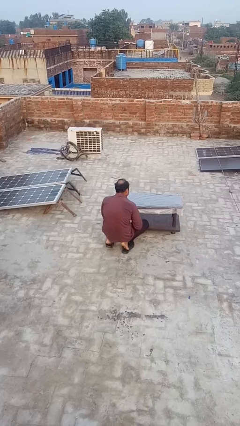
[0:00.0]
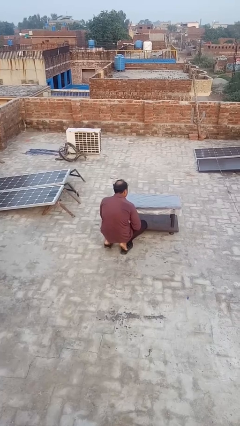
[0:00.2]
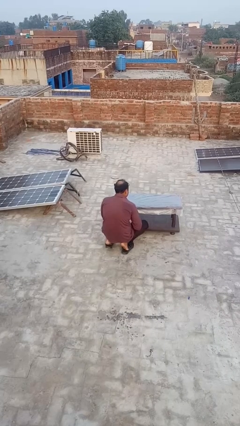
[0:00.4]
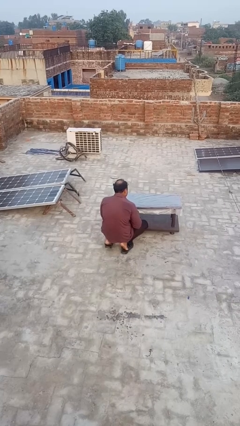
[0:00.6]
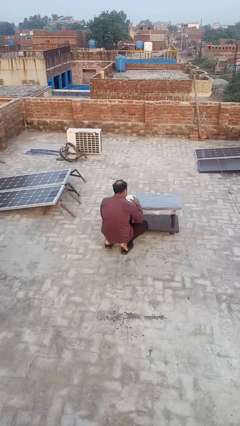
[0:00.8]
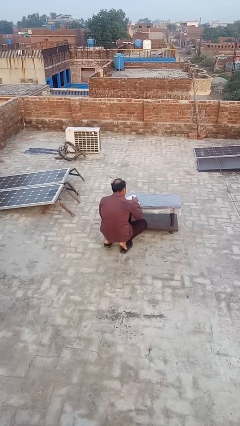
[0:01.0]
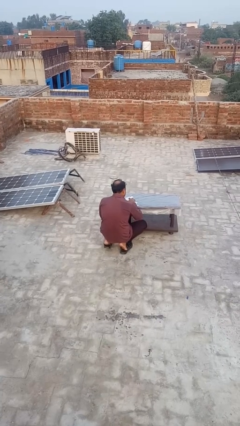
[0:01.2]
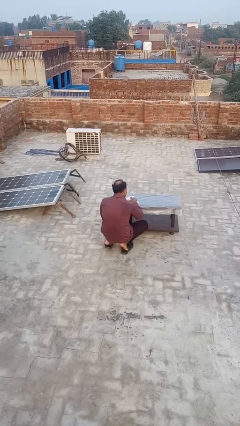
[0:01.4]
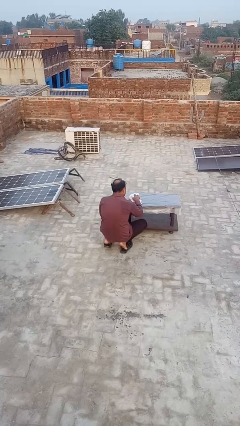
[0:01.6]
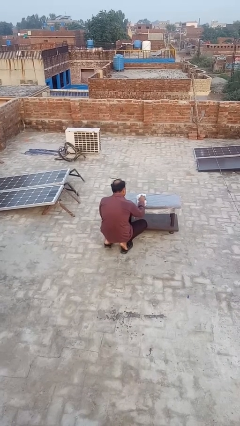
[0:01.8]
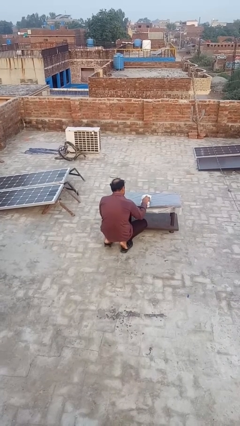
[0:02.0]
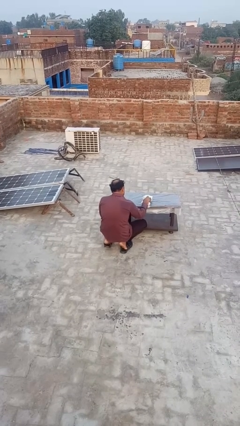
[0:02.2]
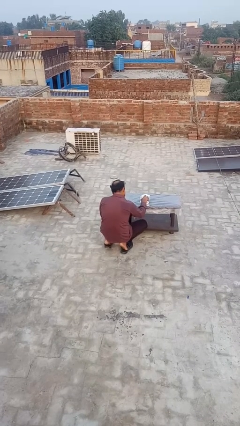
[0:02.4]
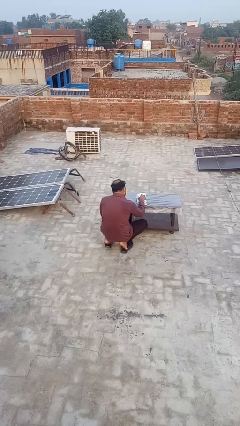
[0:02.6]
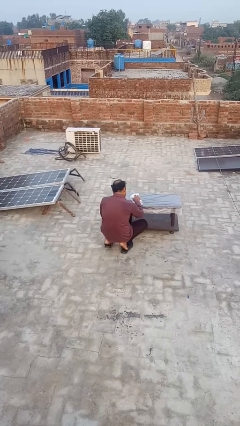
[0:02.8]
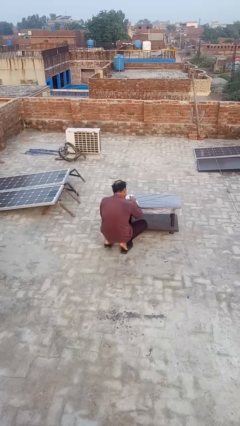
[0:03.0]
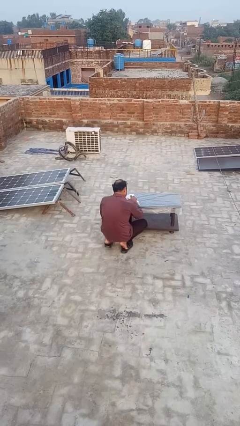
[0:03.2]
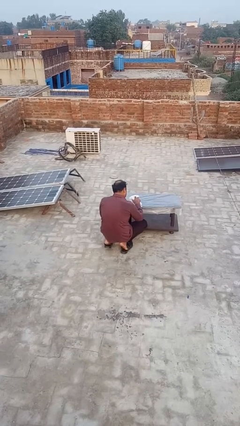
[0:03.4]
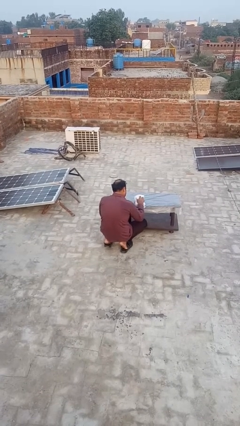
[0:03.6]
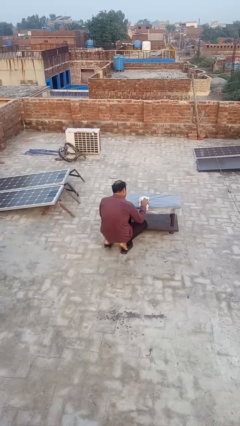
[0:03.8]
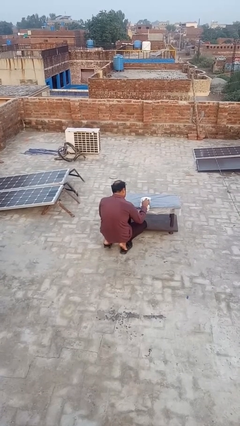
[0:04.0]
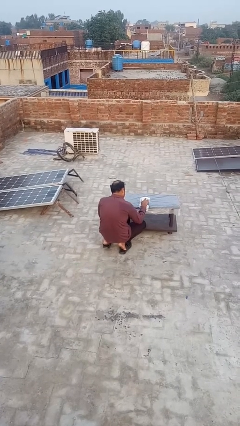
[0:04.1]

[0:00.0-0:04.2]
person cleans table with rag

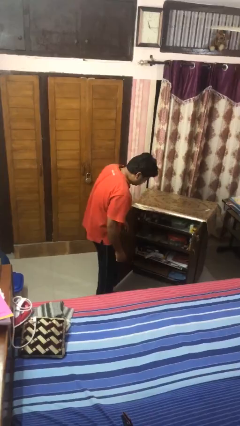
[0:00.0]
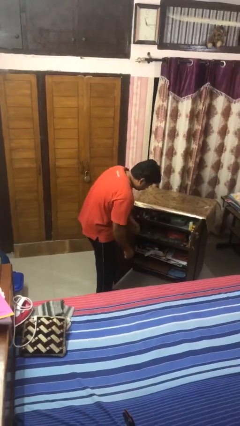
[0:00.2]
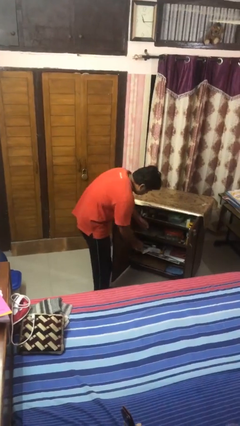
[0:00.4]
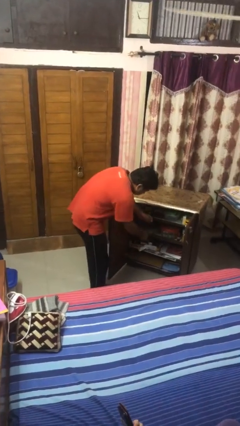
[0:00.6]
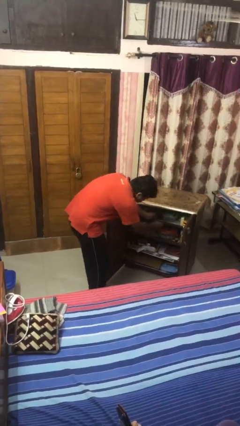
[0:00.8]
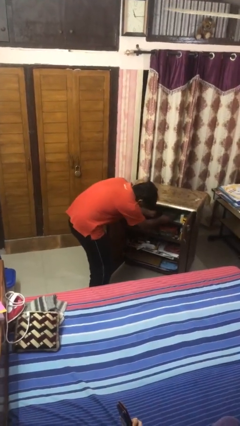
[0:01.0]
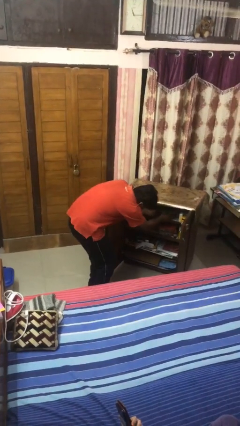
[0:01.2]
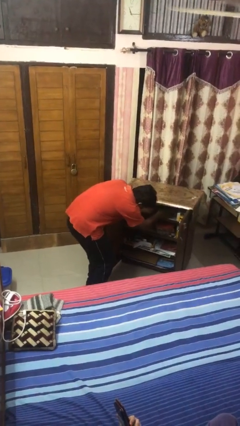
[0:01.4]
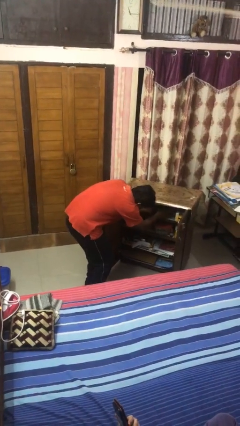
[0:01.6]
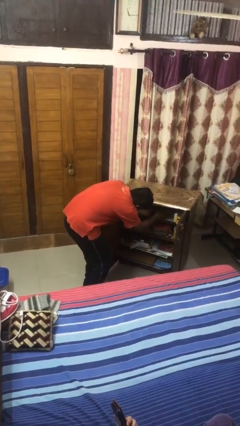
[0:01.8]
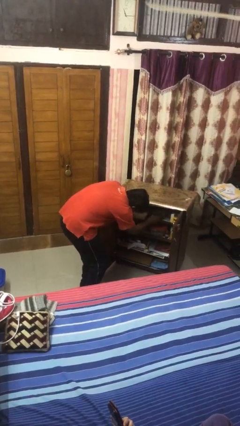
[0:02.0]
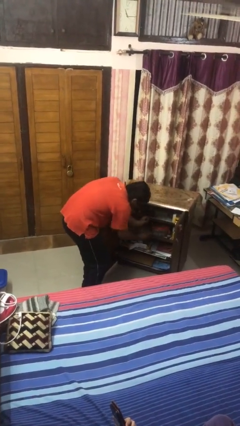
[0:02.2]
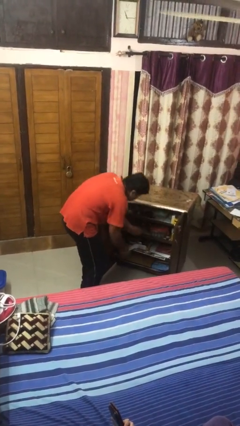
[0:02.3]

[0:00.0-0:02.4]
person searches in cabinet

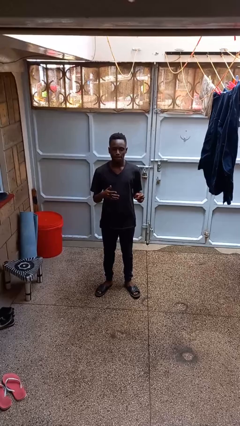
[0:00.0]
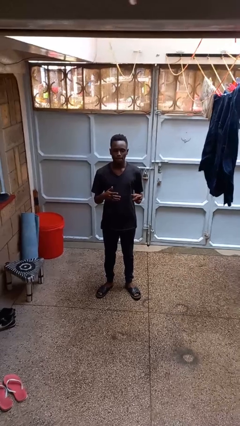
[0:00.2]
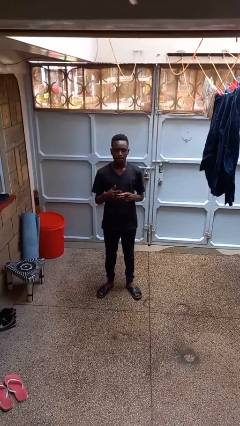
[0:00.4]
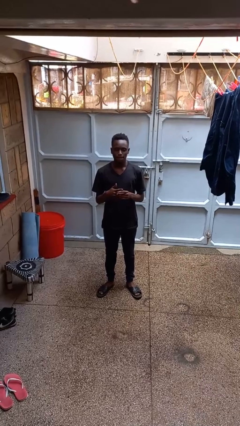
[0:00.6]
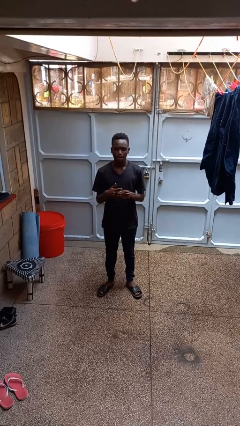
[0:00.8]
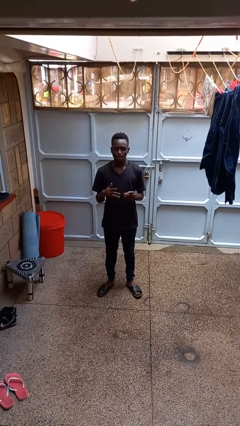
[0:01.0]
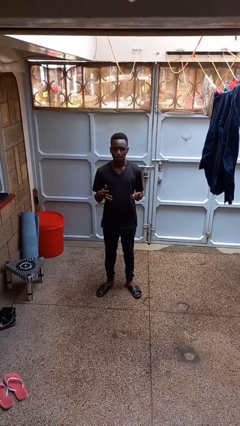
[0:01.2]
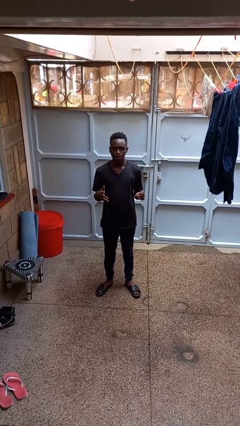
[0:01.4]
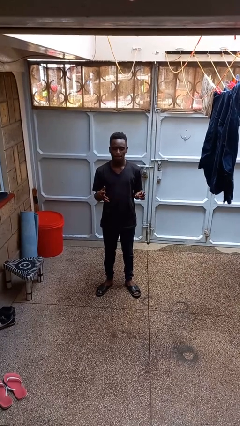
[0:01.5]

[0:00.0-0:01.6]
person takes off ring

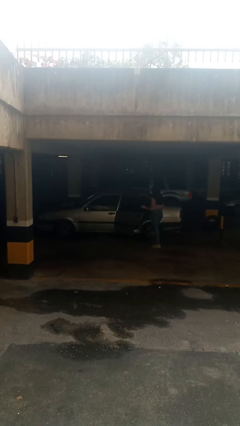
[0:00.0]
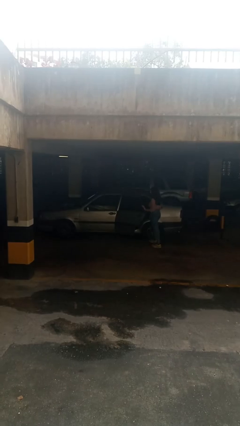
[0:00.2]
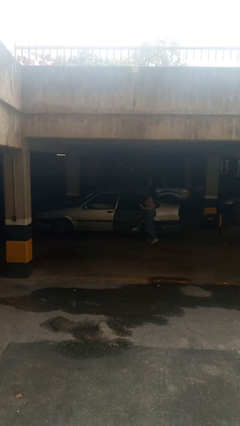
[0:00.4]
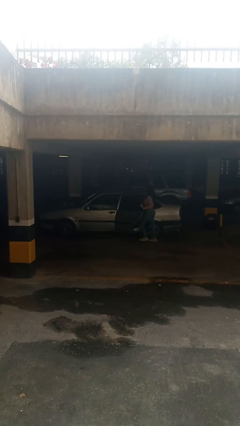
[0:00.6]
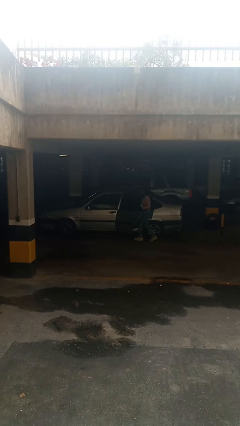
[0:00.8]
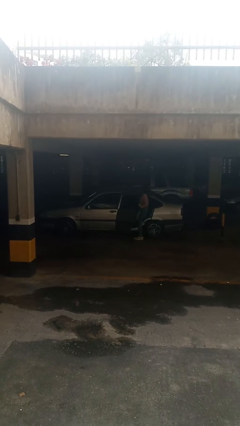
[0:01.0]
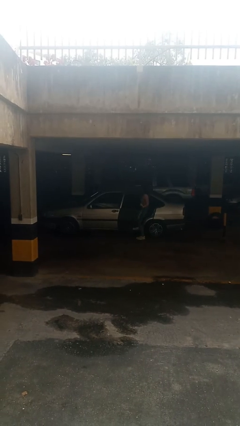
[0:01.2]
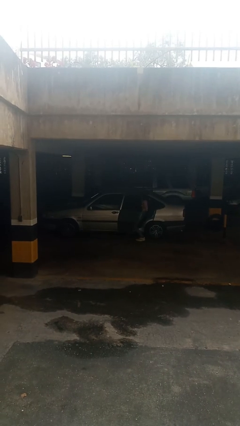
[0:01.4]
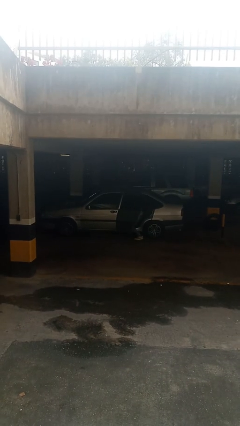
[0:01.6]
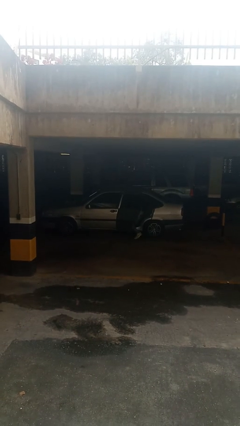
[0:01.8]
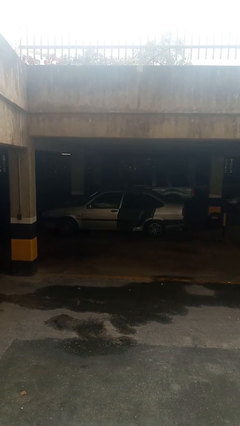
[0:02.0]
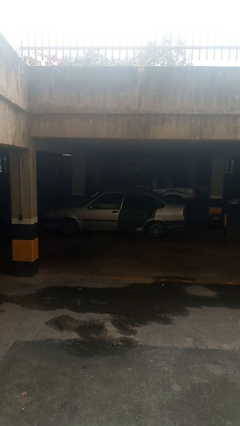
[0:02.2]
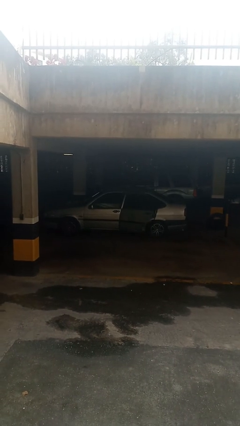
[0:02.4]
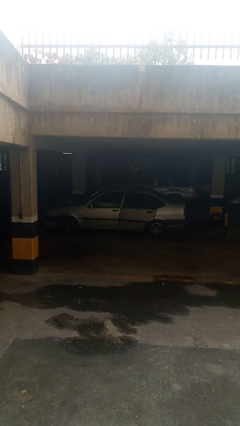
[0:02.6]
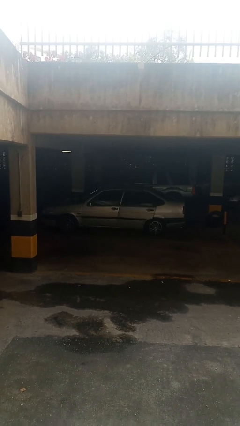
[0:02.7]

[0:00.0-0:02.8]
car picks up person

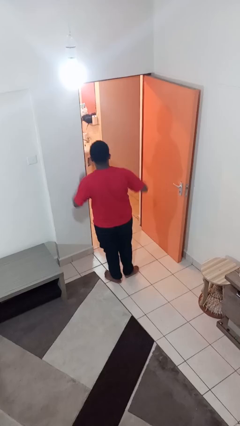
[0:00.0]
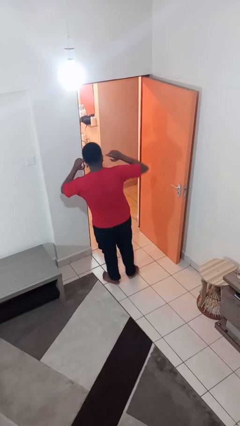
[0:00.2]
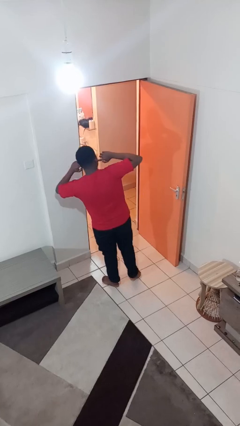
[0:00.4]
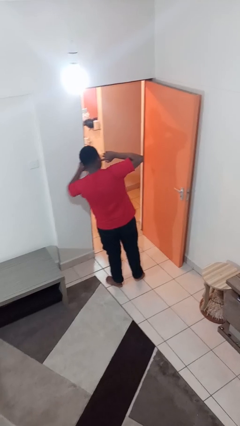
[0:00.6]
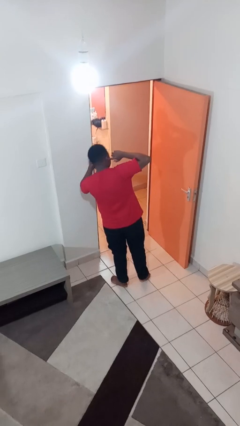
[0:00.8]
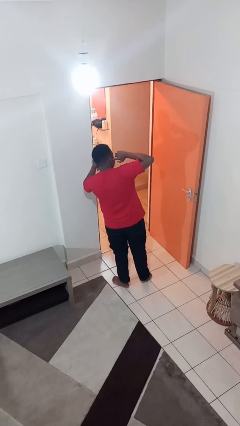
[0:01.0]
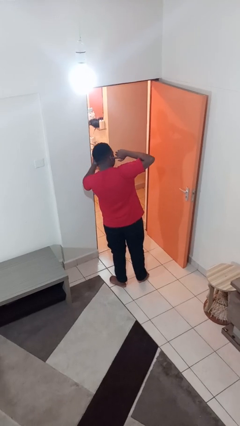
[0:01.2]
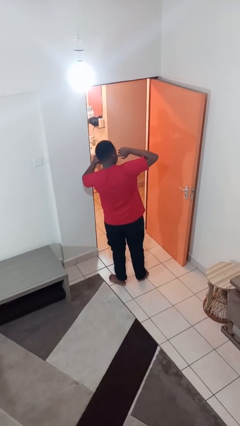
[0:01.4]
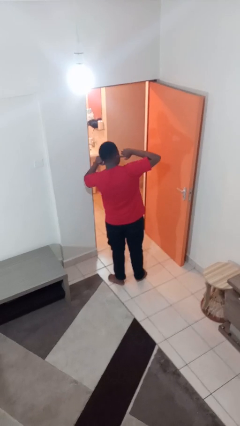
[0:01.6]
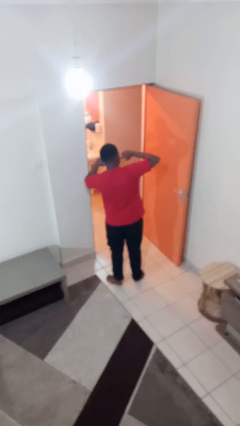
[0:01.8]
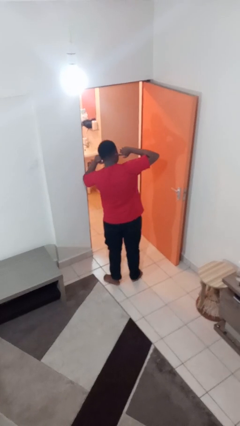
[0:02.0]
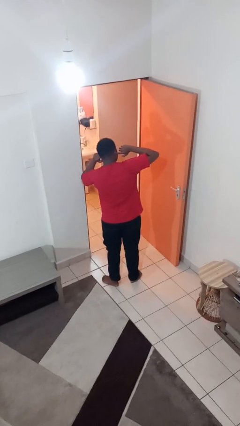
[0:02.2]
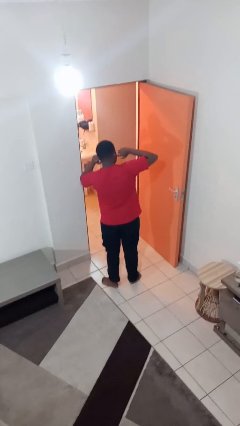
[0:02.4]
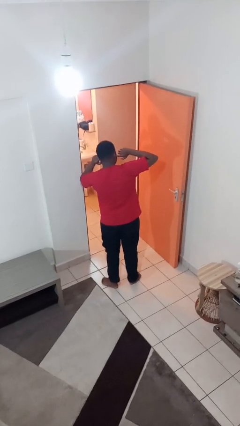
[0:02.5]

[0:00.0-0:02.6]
person puts fingers in ear

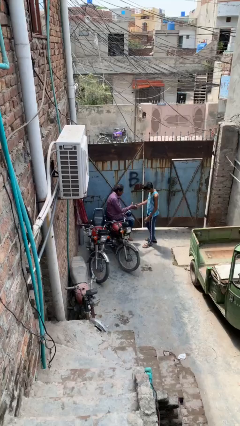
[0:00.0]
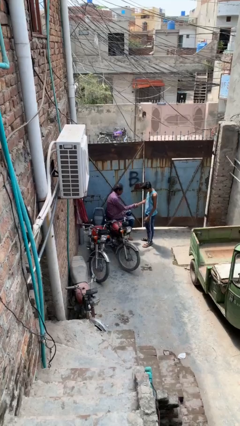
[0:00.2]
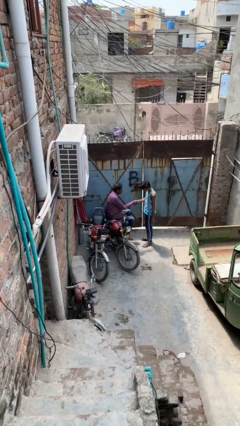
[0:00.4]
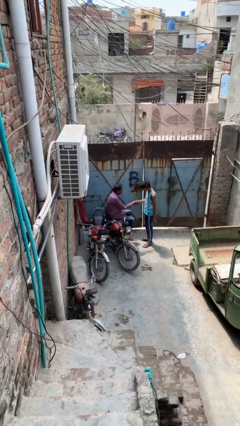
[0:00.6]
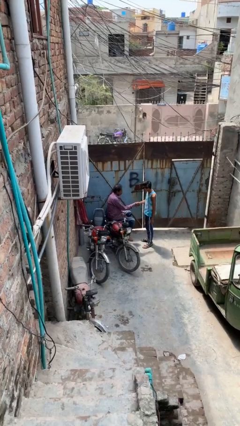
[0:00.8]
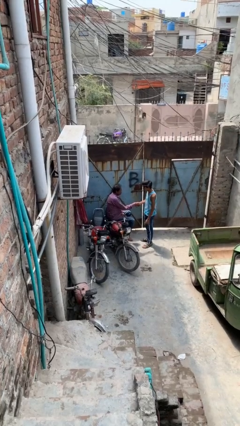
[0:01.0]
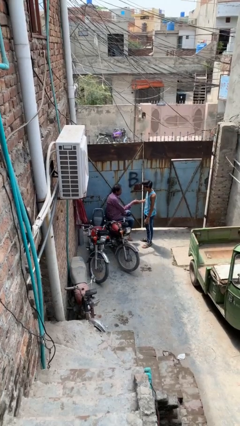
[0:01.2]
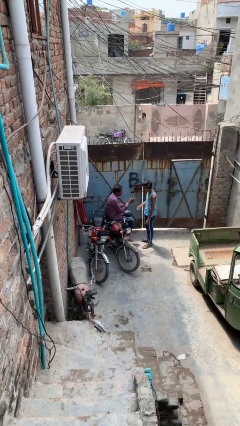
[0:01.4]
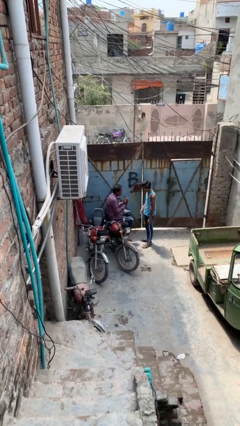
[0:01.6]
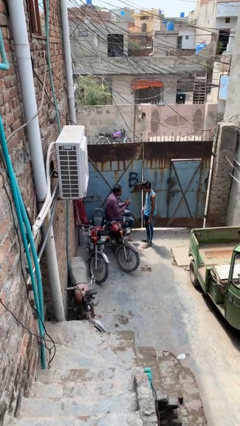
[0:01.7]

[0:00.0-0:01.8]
person shakes hand

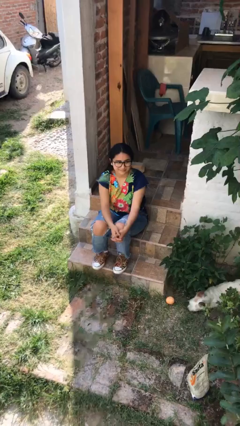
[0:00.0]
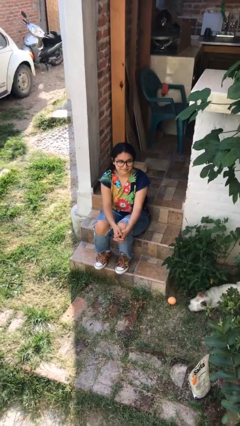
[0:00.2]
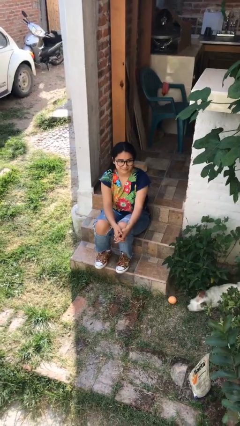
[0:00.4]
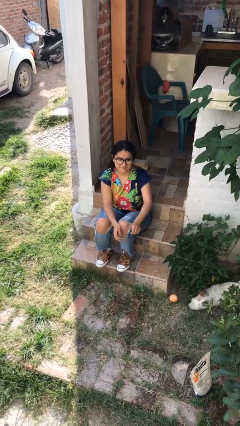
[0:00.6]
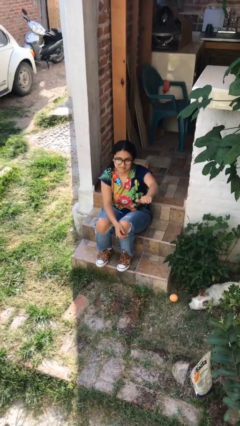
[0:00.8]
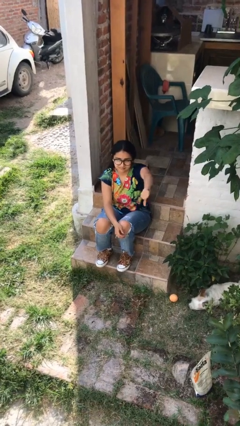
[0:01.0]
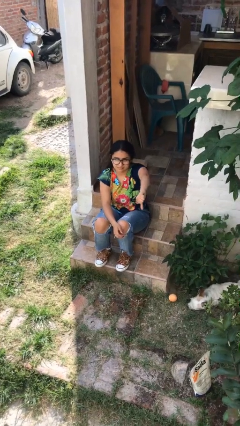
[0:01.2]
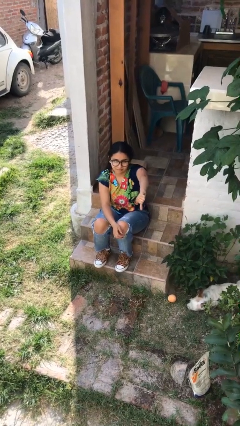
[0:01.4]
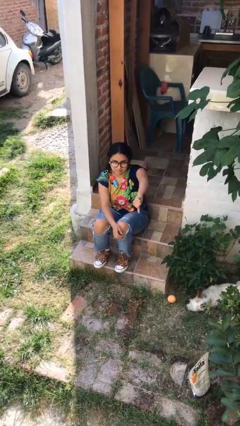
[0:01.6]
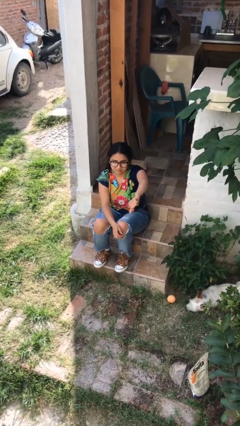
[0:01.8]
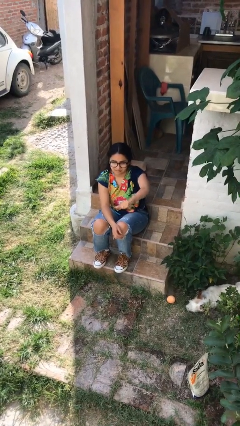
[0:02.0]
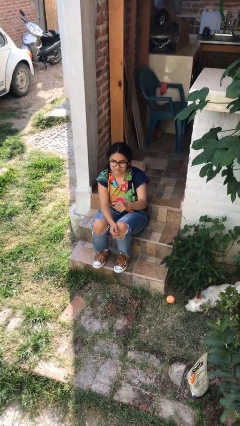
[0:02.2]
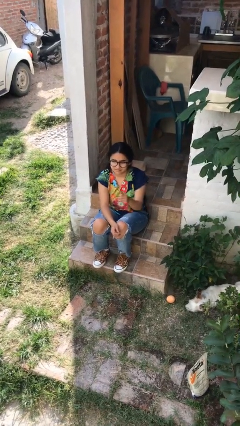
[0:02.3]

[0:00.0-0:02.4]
person gestures thumbs down
